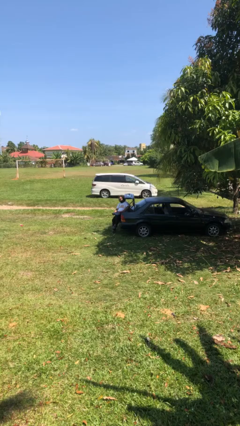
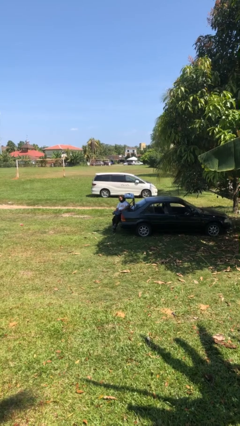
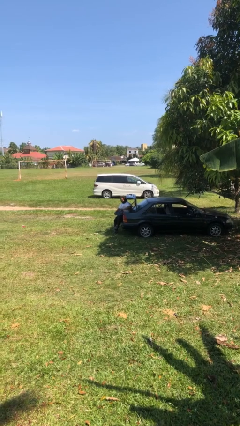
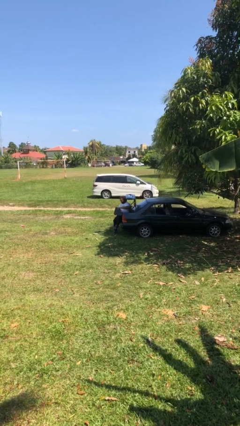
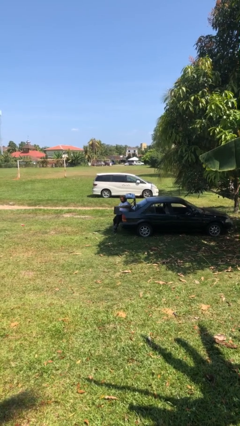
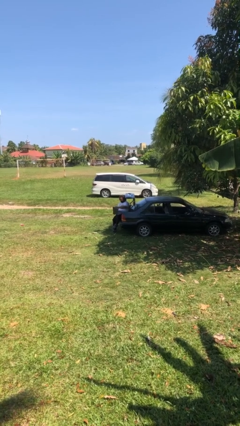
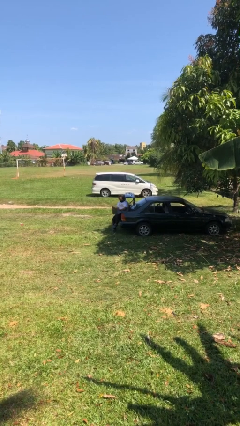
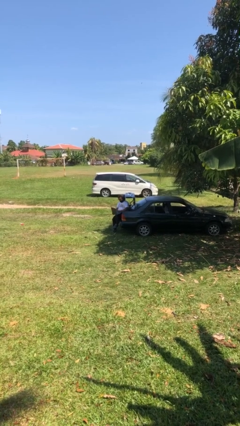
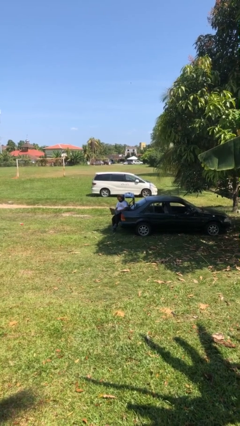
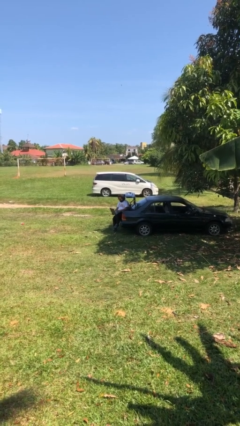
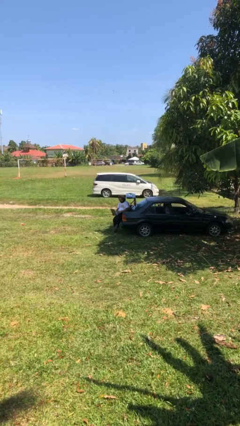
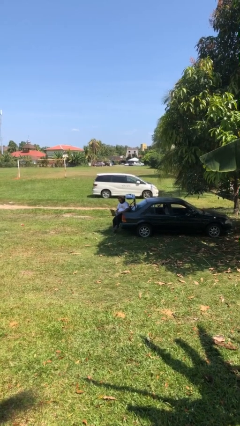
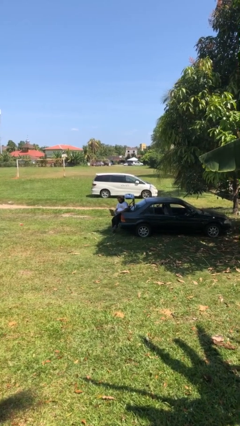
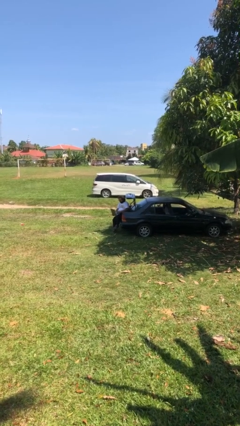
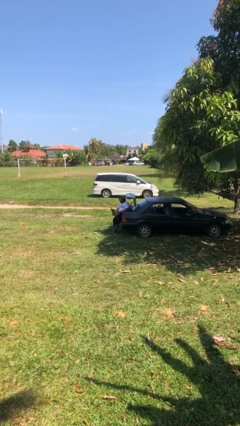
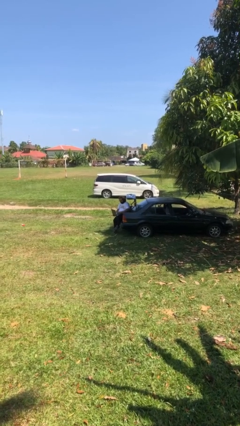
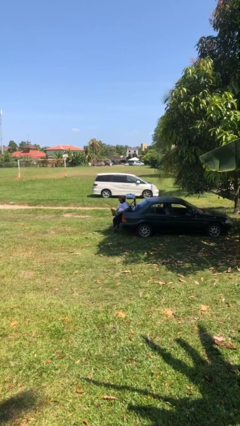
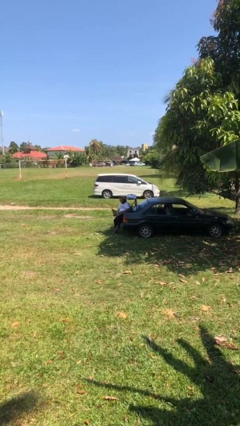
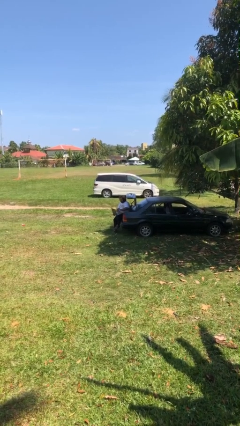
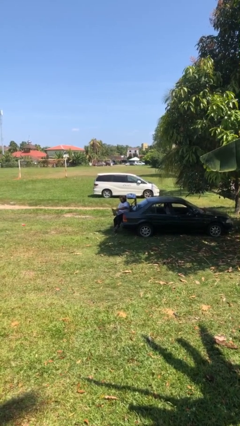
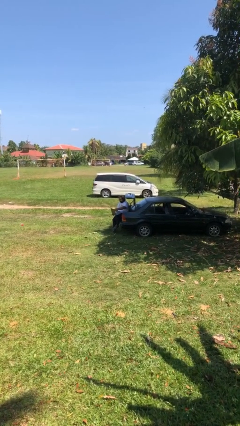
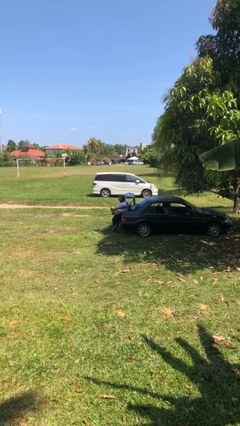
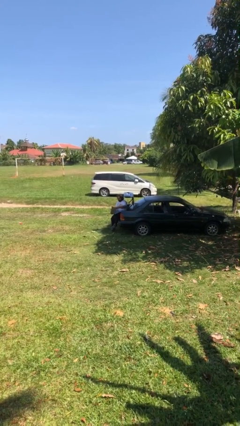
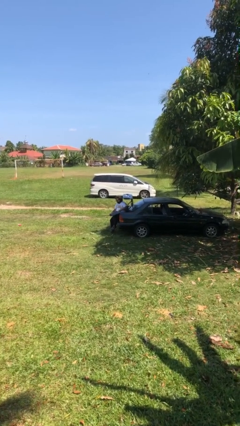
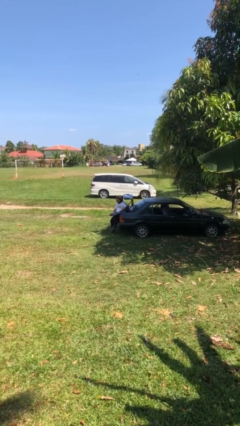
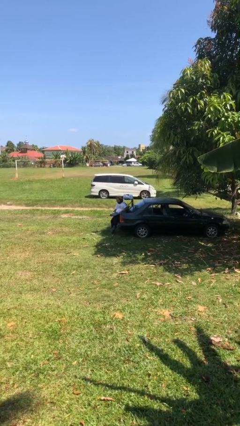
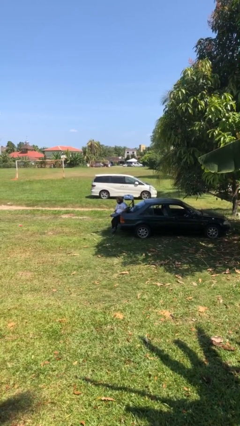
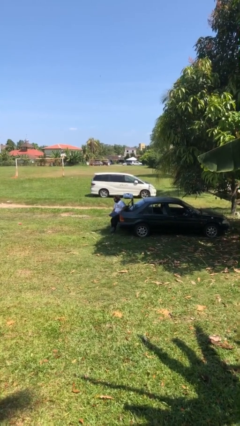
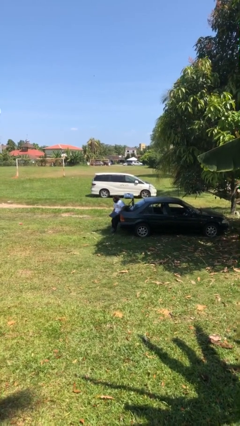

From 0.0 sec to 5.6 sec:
person interacts with laptop

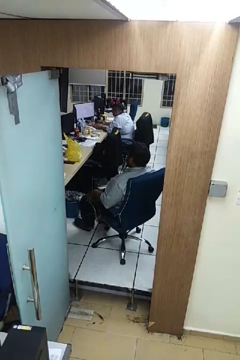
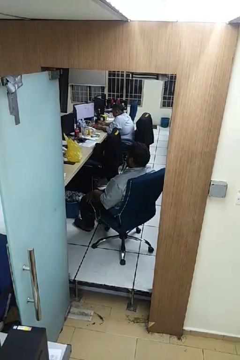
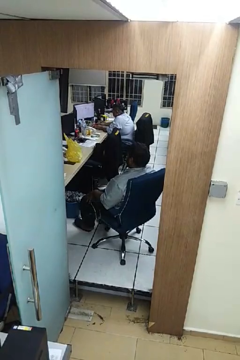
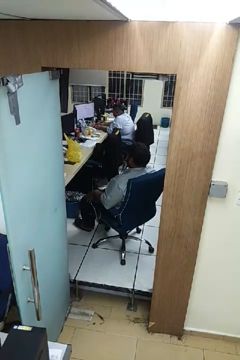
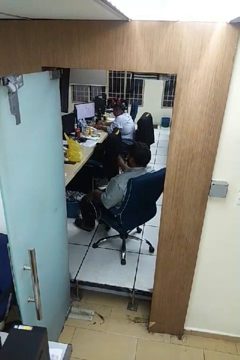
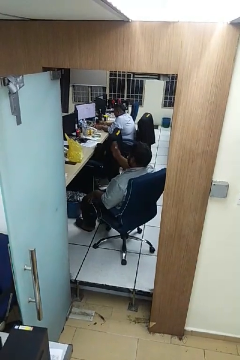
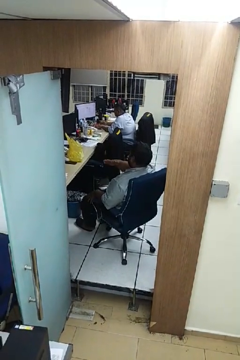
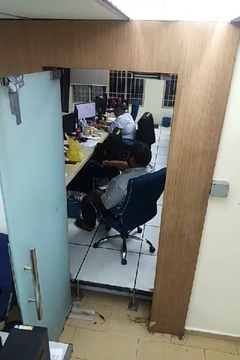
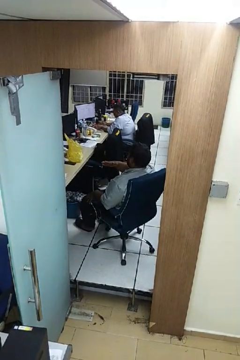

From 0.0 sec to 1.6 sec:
person gestures swipe left

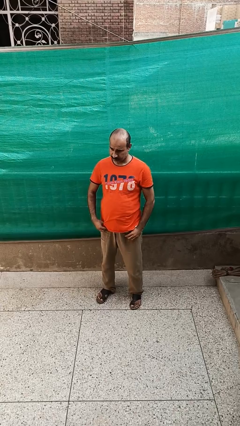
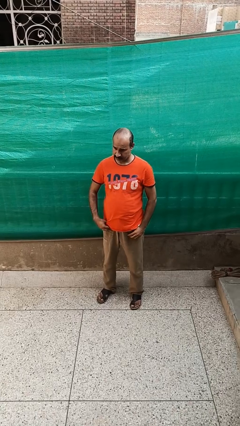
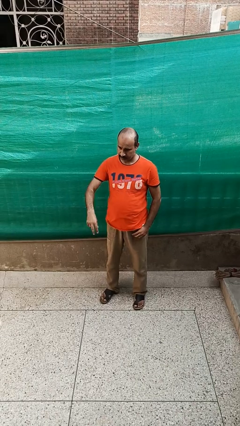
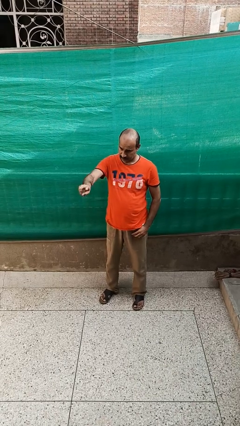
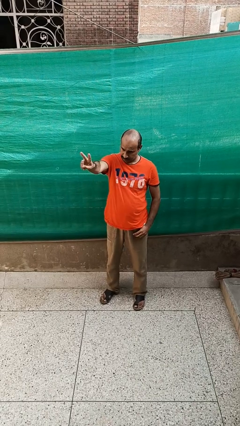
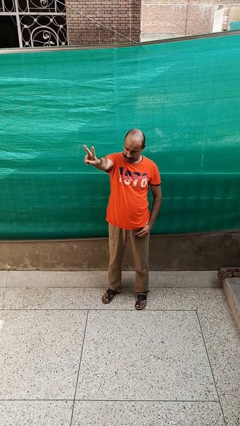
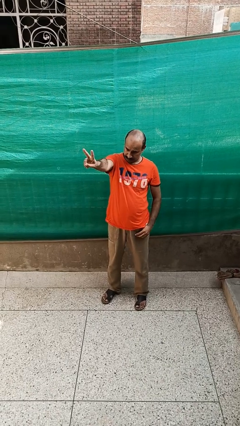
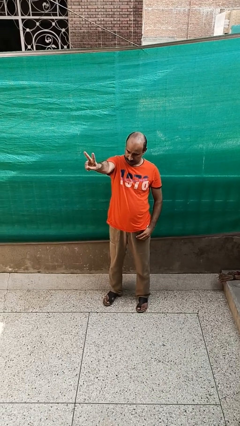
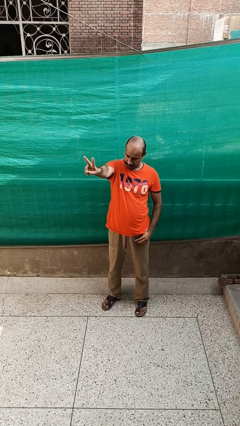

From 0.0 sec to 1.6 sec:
person gestures peace

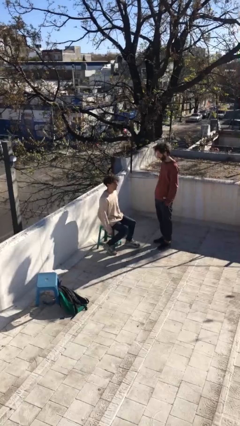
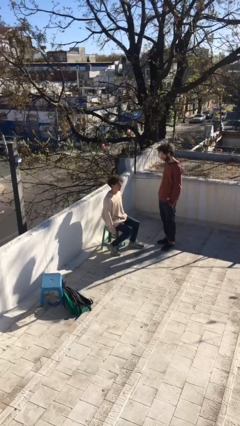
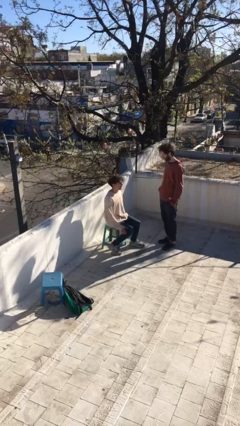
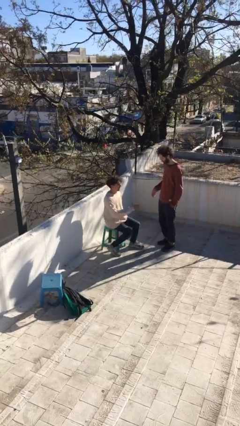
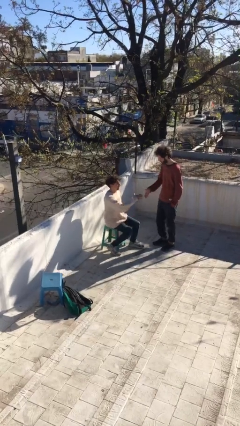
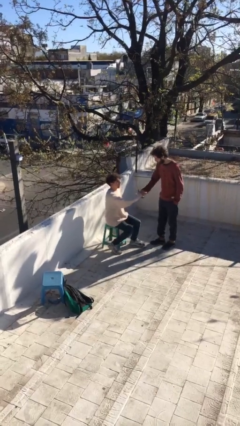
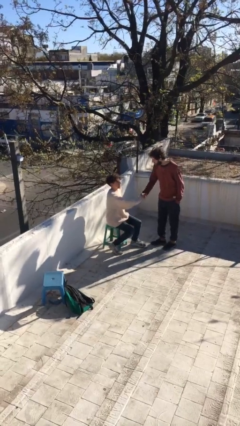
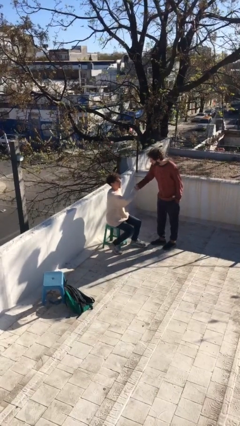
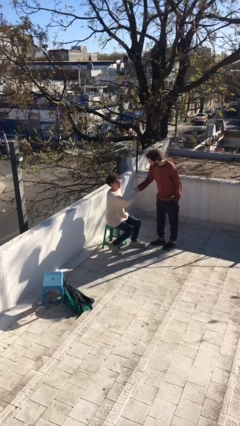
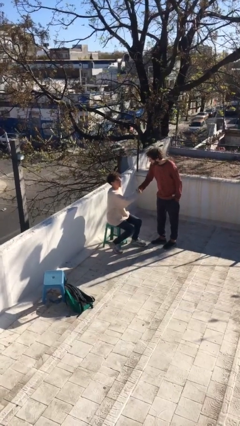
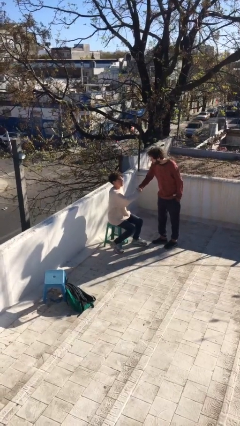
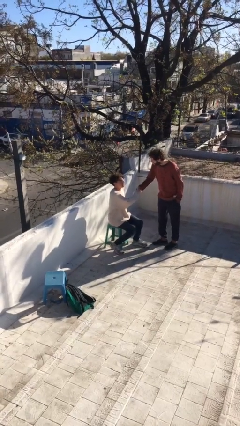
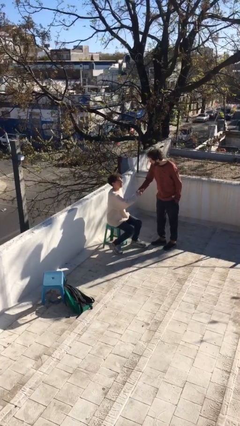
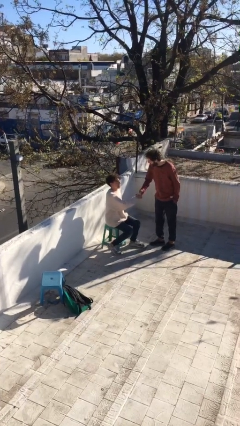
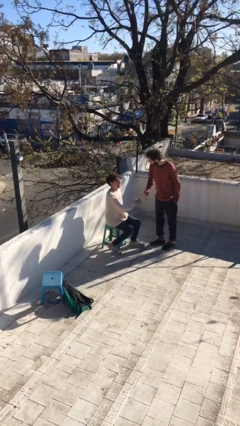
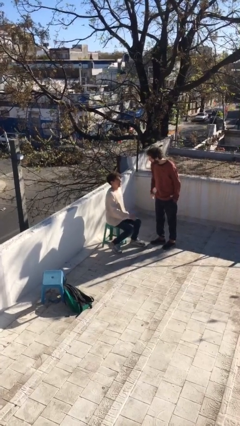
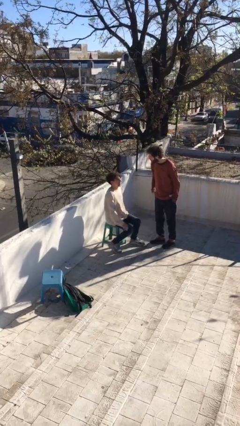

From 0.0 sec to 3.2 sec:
person shakes hand

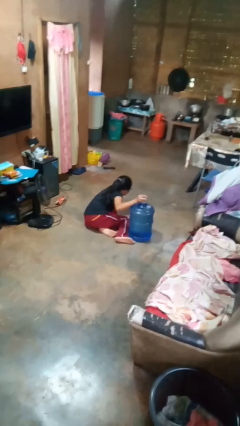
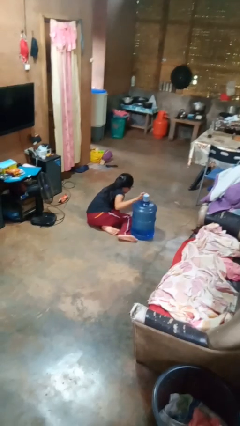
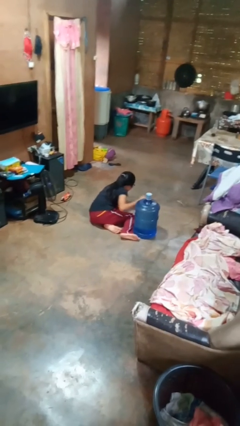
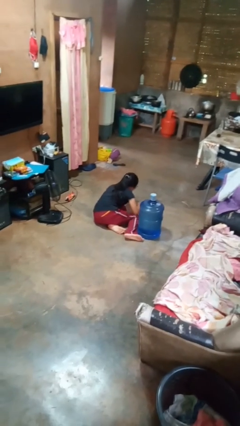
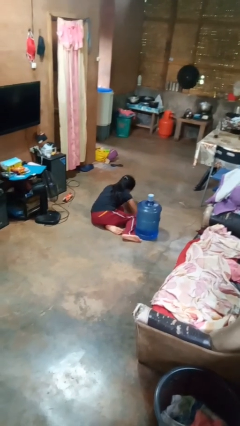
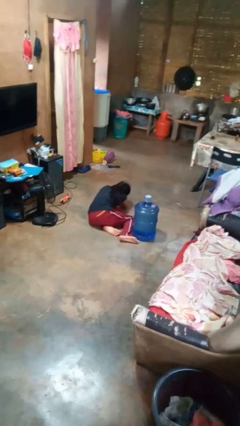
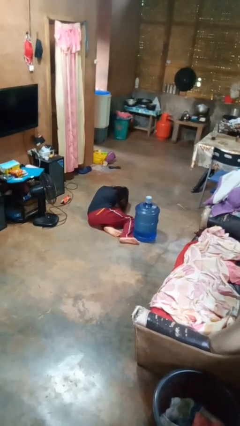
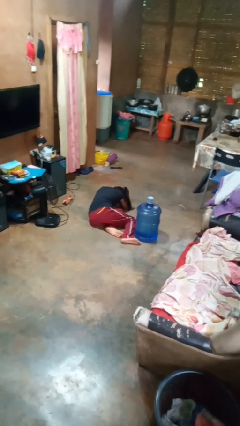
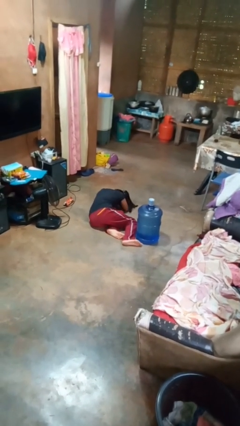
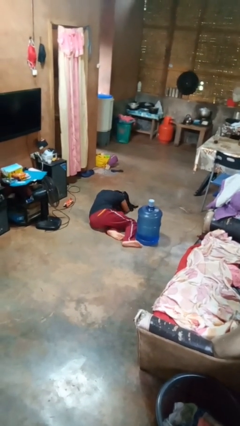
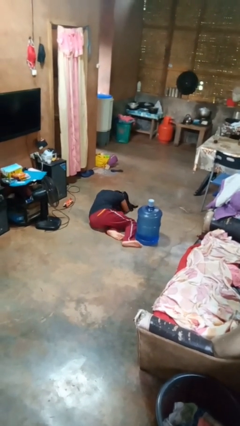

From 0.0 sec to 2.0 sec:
person lies down on floor

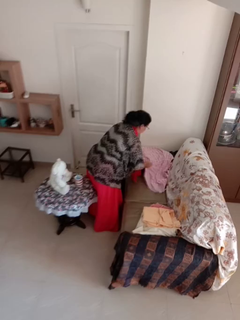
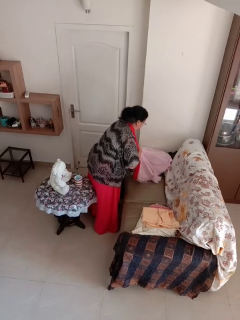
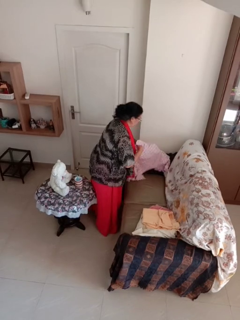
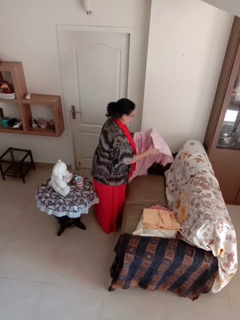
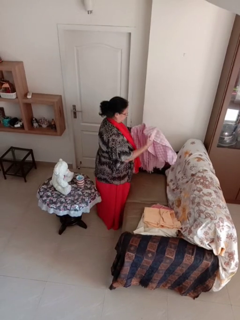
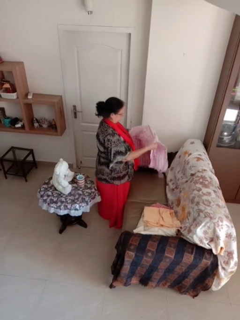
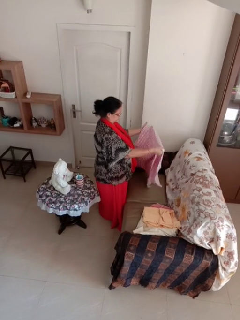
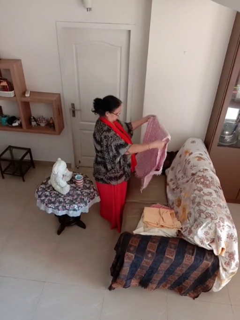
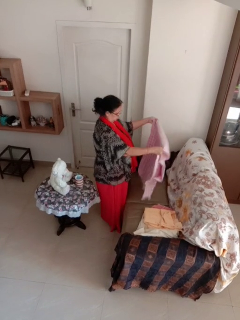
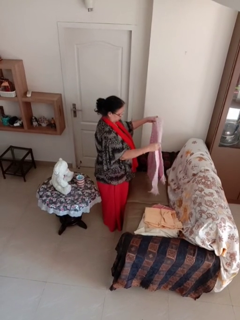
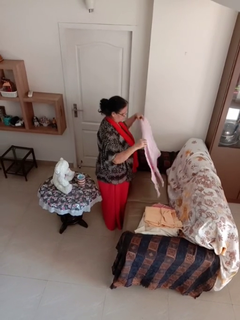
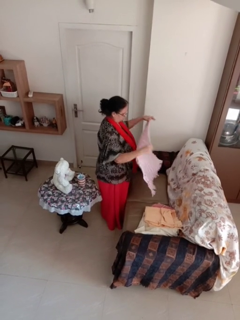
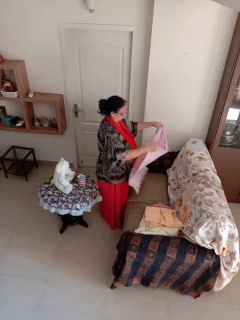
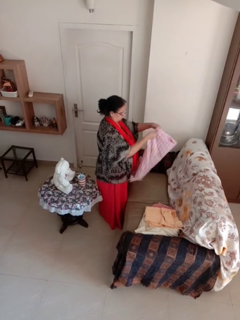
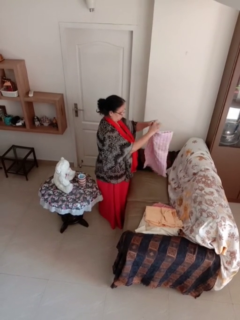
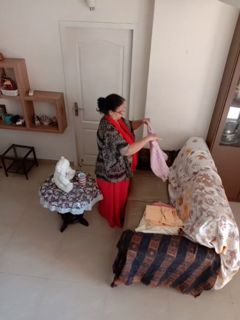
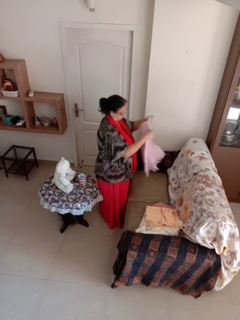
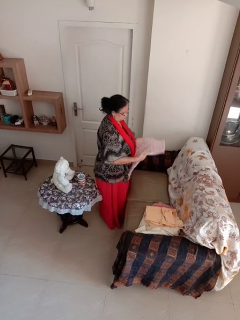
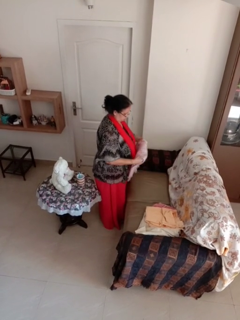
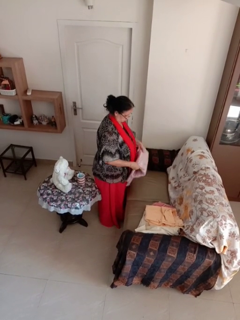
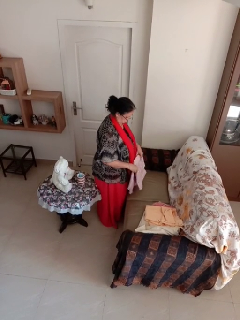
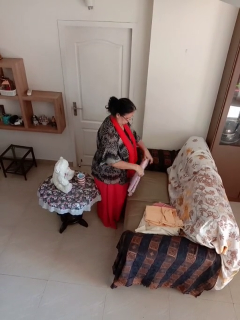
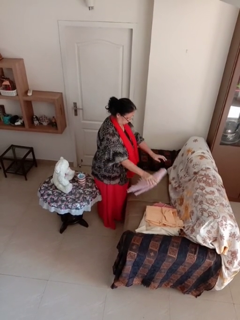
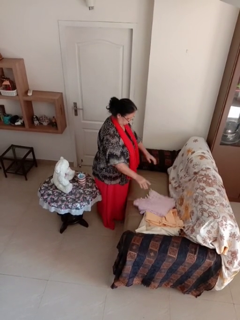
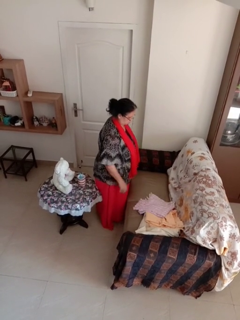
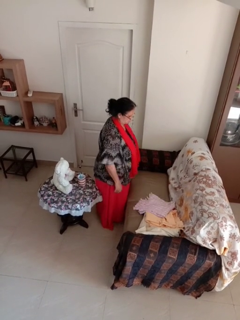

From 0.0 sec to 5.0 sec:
person folds towel
